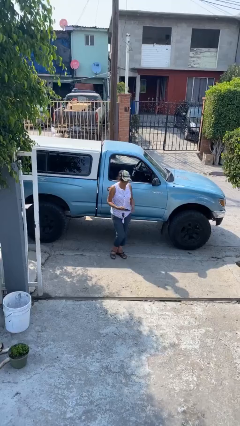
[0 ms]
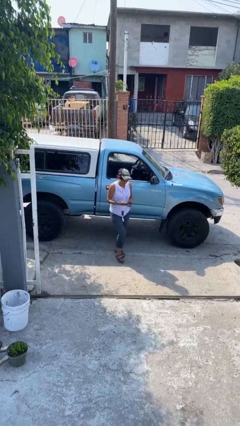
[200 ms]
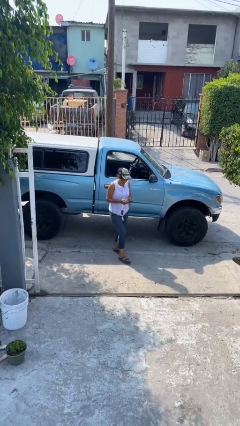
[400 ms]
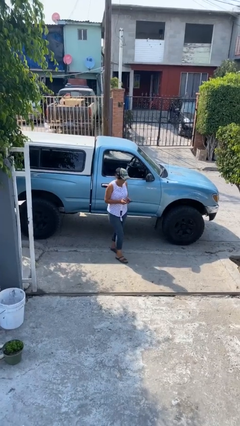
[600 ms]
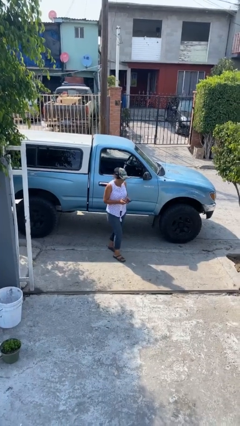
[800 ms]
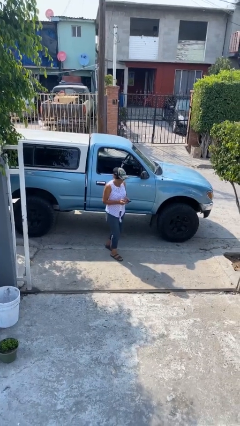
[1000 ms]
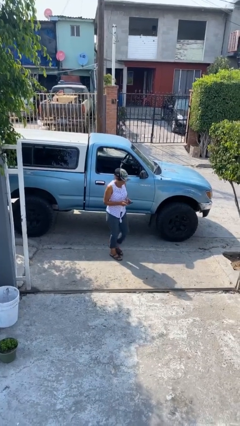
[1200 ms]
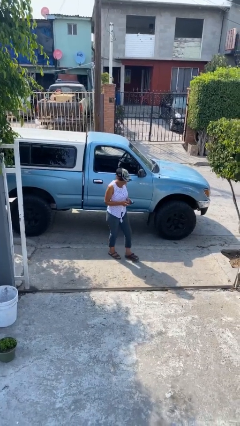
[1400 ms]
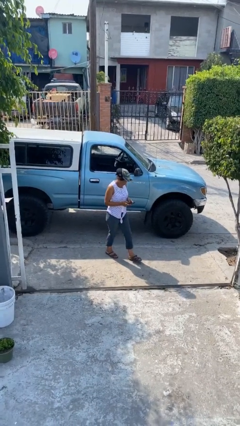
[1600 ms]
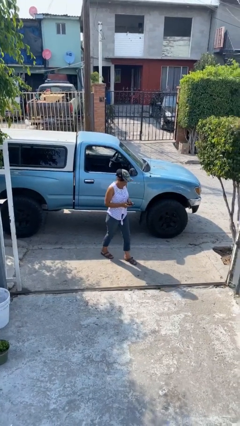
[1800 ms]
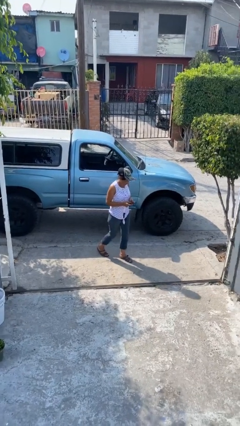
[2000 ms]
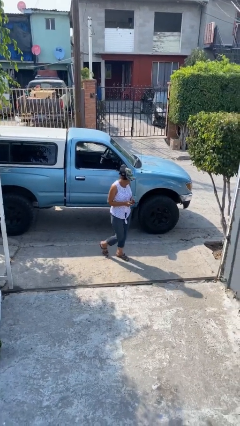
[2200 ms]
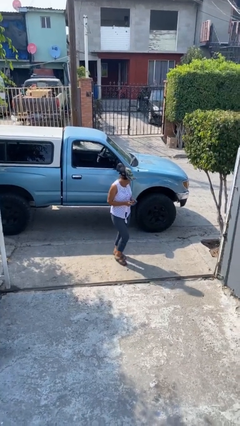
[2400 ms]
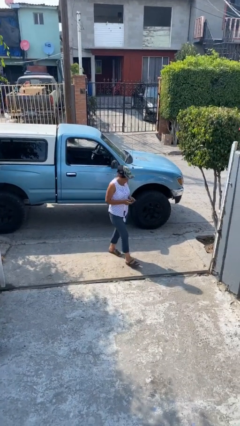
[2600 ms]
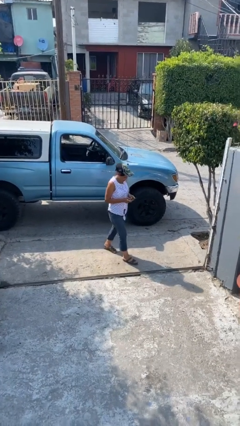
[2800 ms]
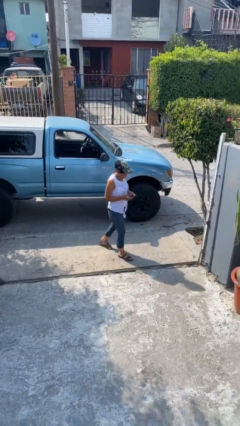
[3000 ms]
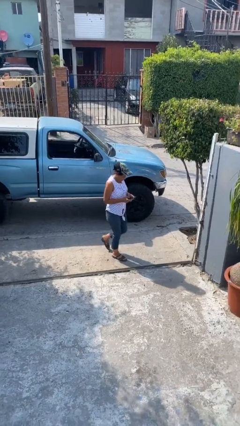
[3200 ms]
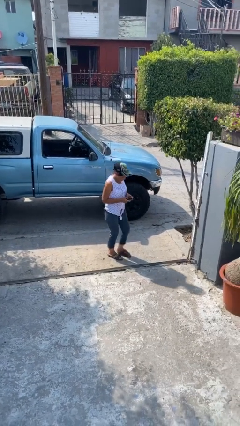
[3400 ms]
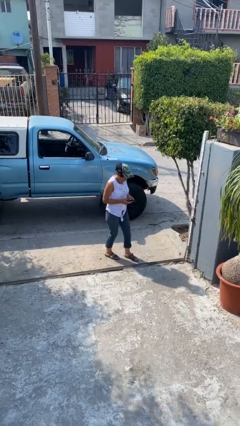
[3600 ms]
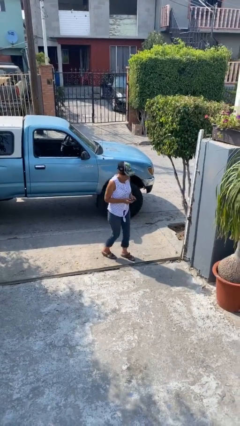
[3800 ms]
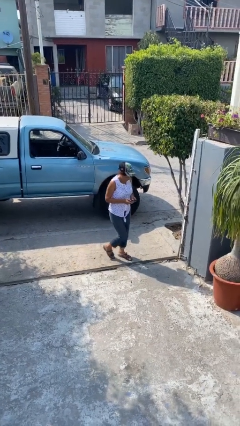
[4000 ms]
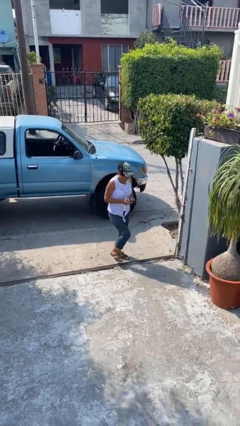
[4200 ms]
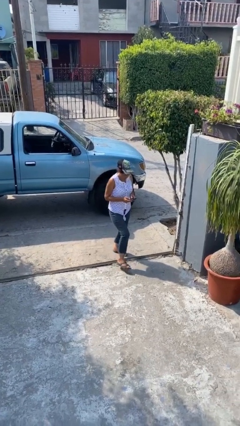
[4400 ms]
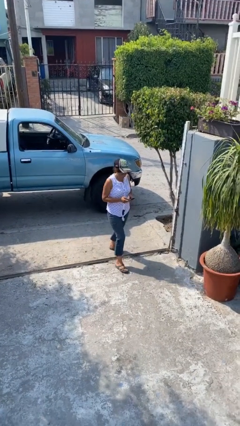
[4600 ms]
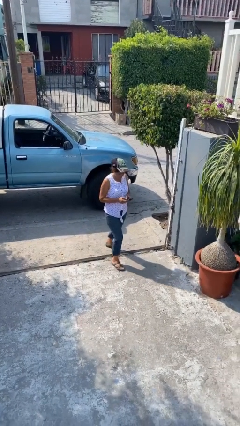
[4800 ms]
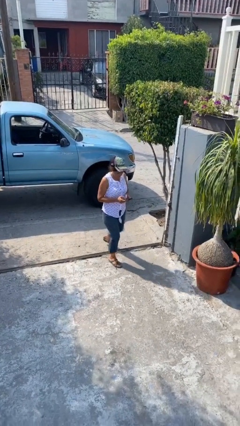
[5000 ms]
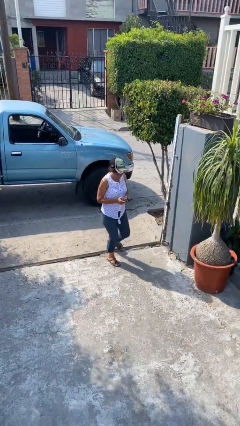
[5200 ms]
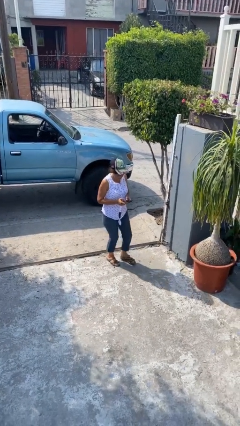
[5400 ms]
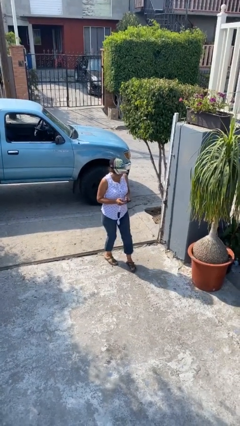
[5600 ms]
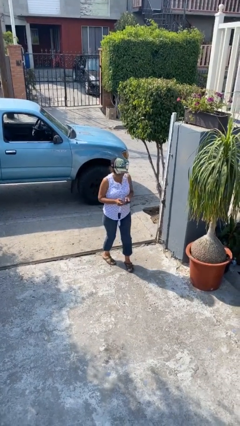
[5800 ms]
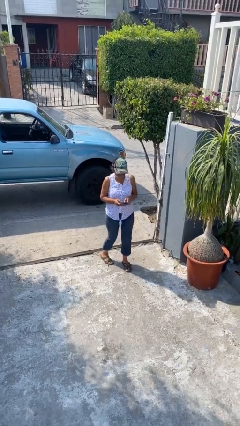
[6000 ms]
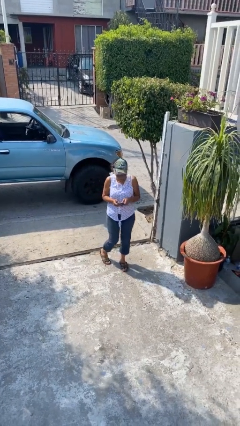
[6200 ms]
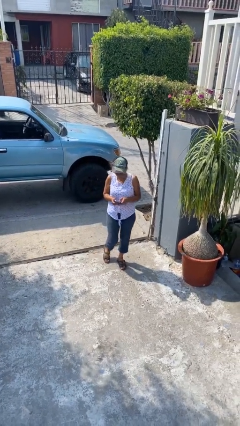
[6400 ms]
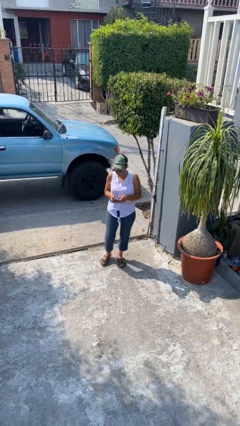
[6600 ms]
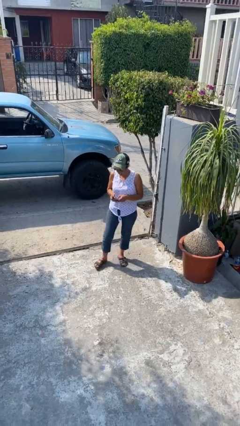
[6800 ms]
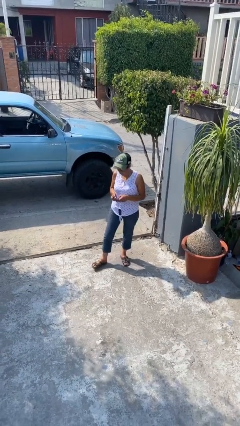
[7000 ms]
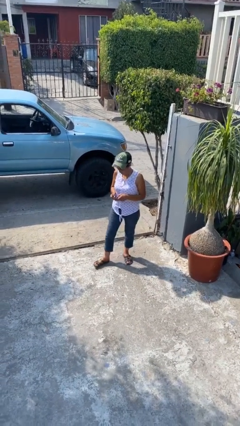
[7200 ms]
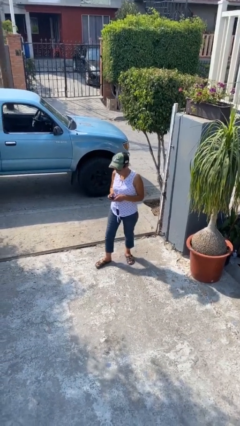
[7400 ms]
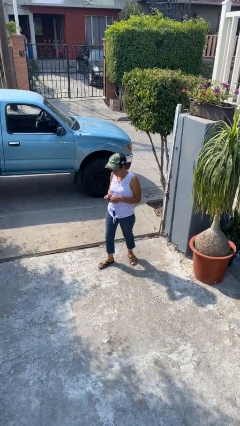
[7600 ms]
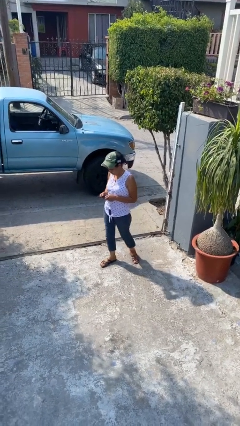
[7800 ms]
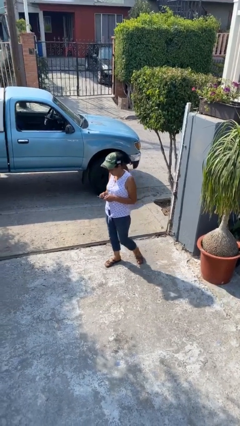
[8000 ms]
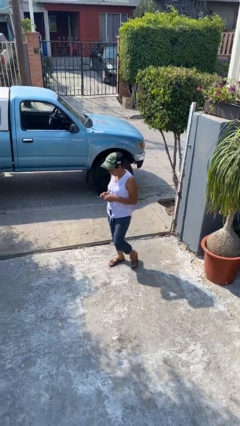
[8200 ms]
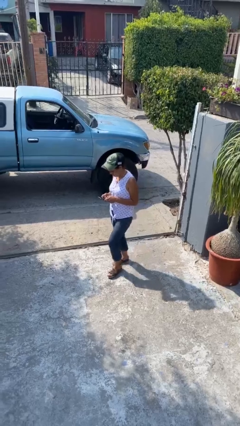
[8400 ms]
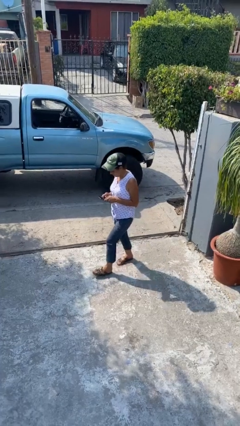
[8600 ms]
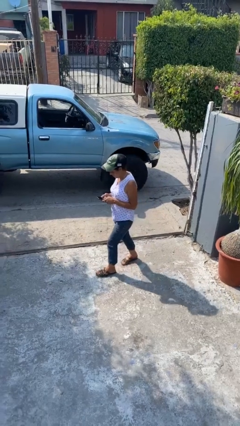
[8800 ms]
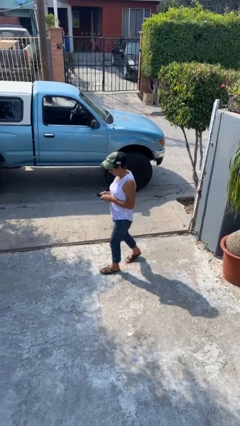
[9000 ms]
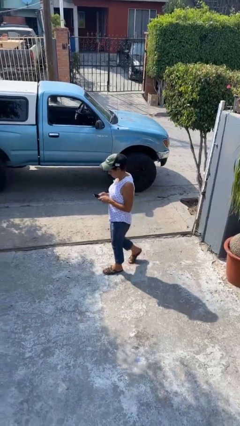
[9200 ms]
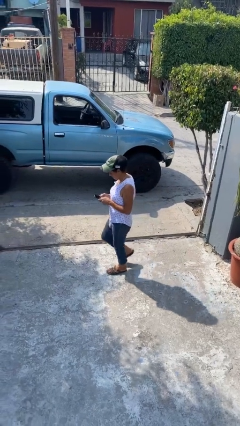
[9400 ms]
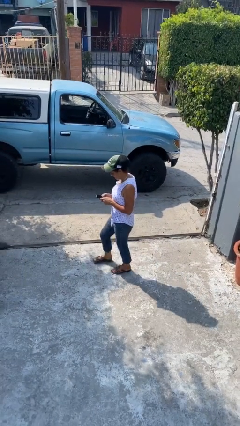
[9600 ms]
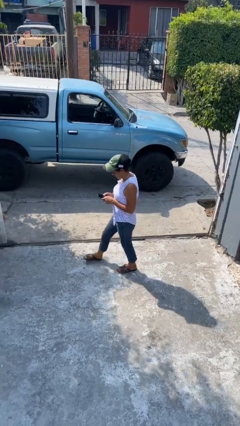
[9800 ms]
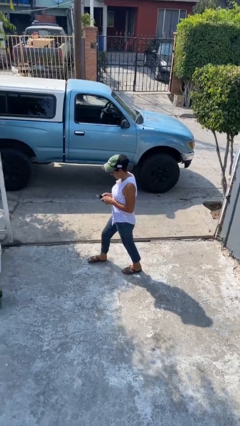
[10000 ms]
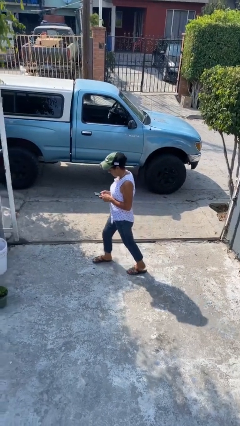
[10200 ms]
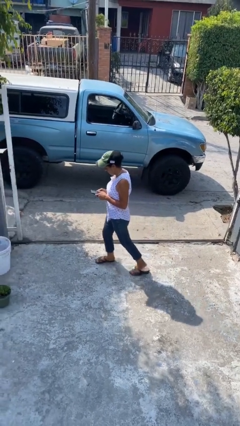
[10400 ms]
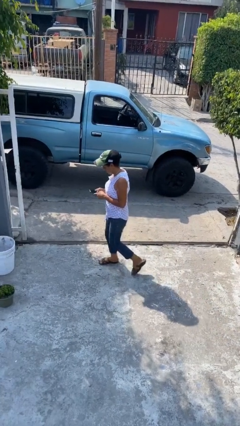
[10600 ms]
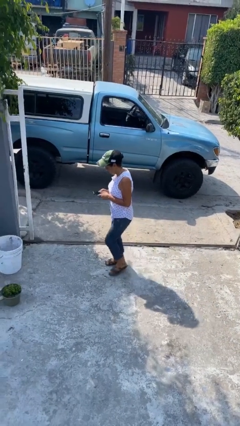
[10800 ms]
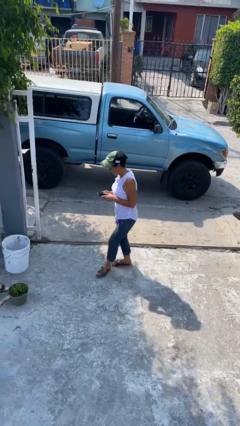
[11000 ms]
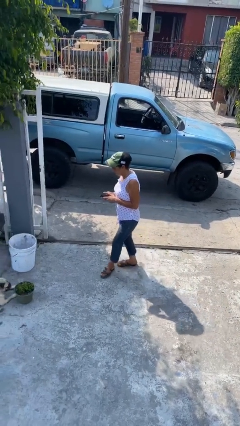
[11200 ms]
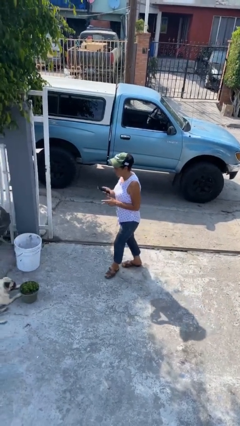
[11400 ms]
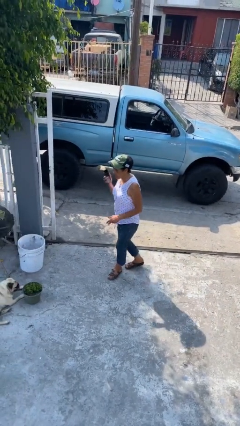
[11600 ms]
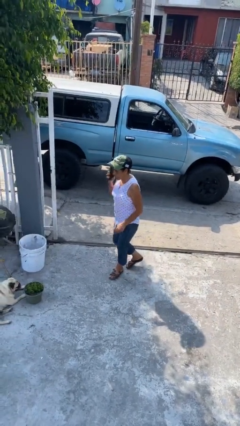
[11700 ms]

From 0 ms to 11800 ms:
person texts on phone

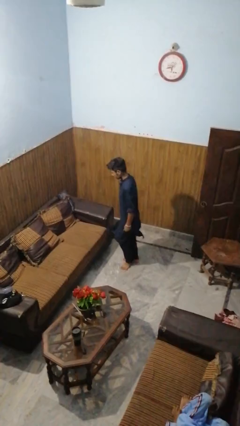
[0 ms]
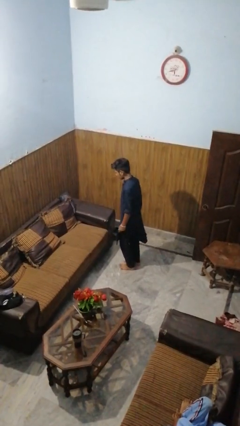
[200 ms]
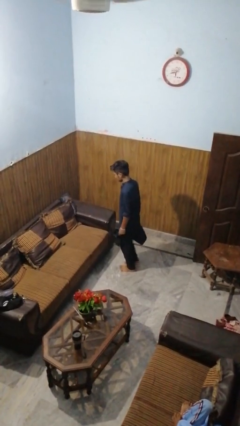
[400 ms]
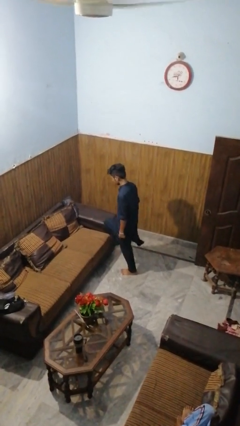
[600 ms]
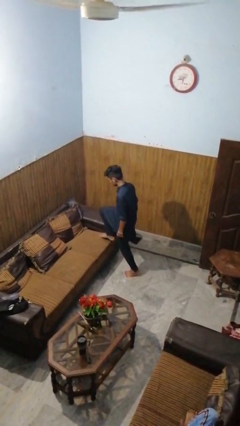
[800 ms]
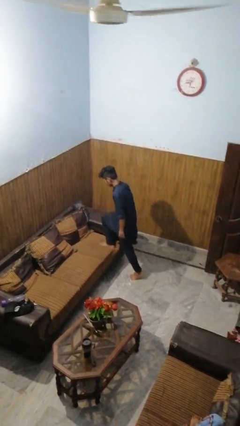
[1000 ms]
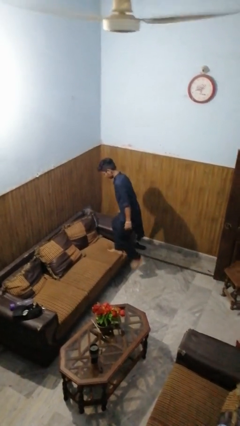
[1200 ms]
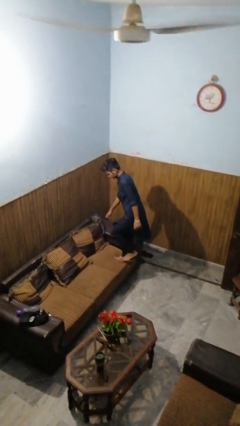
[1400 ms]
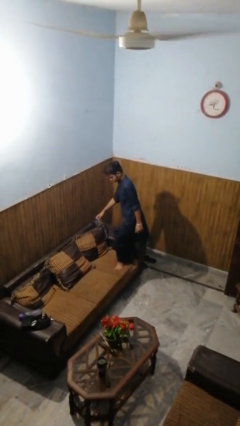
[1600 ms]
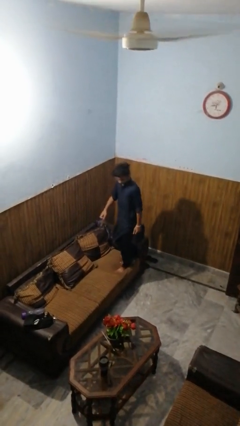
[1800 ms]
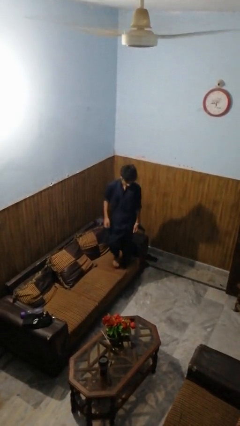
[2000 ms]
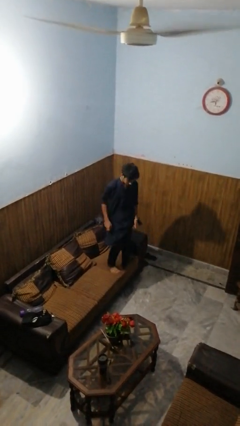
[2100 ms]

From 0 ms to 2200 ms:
person climbs on couch

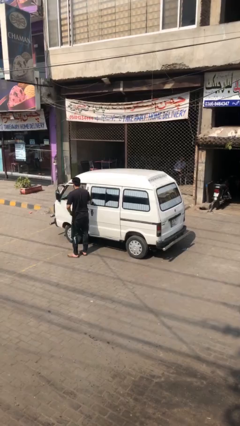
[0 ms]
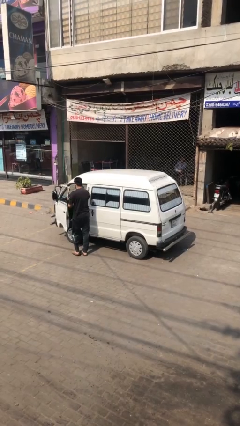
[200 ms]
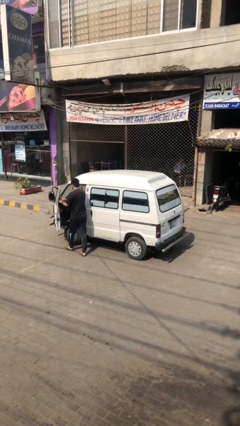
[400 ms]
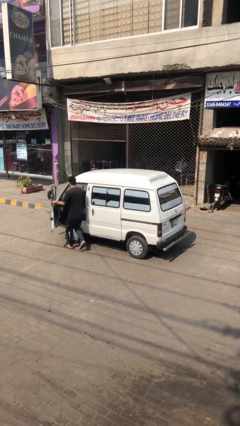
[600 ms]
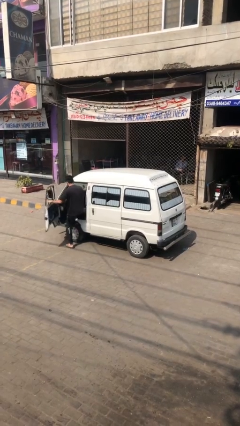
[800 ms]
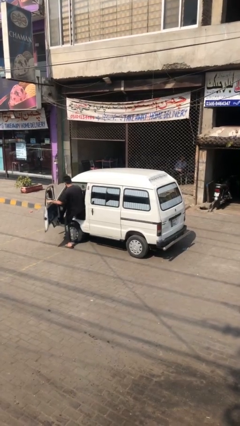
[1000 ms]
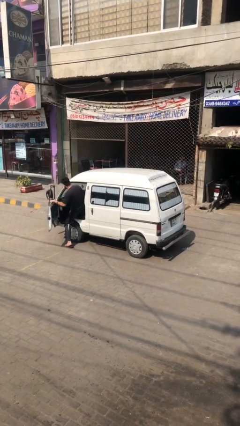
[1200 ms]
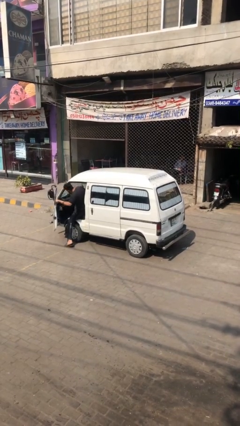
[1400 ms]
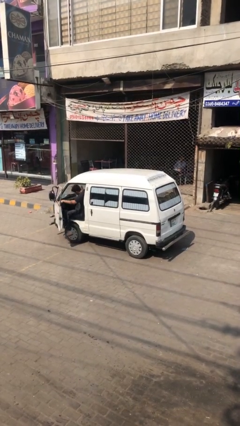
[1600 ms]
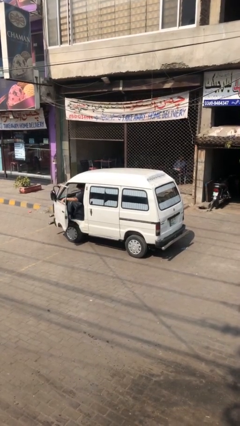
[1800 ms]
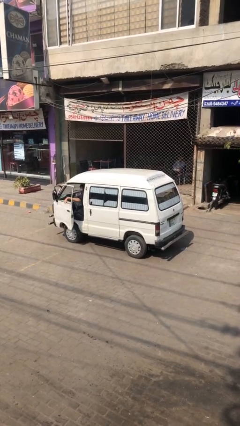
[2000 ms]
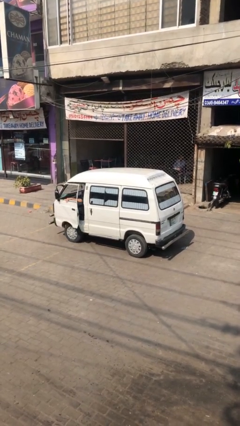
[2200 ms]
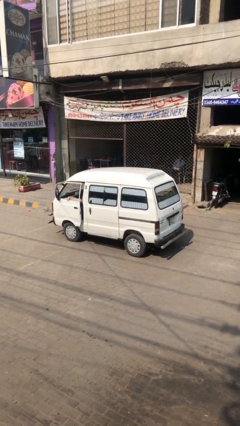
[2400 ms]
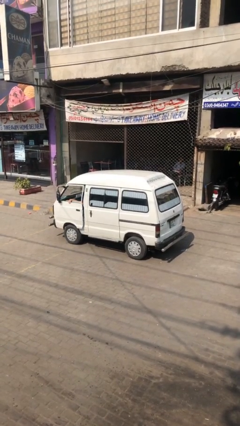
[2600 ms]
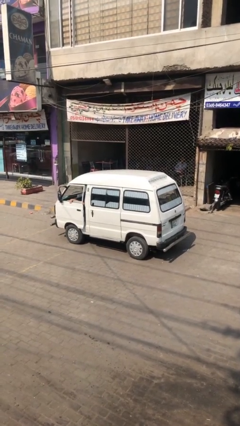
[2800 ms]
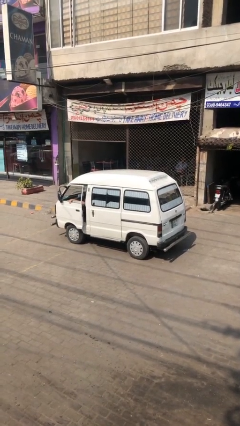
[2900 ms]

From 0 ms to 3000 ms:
car picks up person

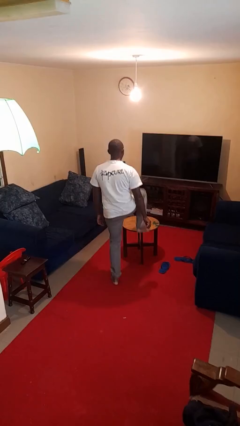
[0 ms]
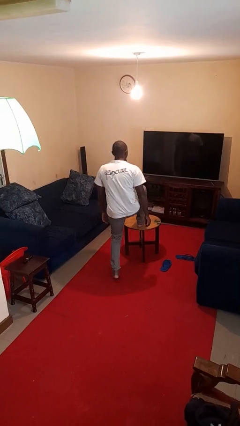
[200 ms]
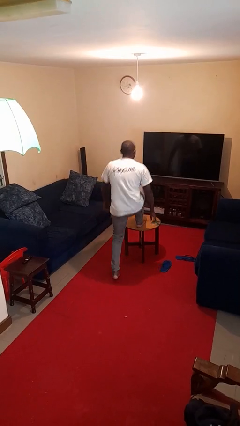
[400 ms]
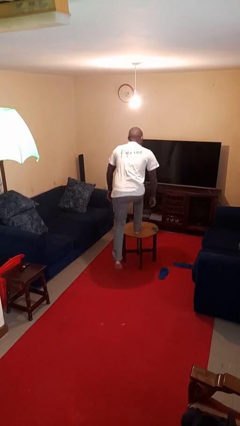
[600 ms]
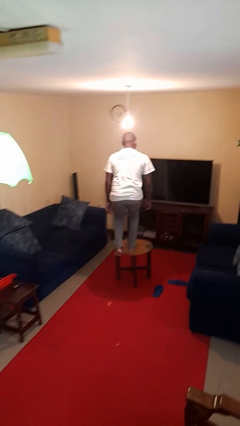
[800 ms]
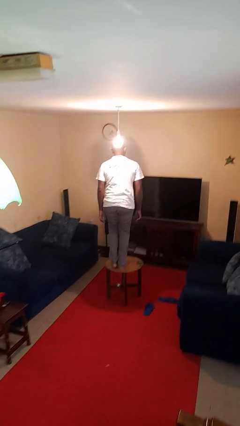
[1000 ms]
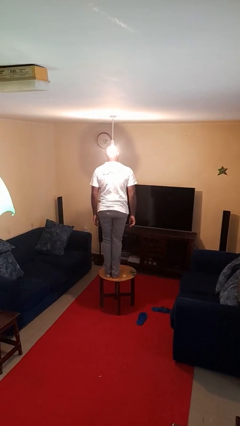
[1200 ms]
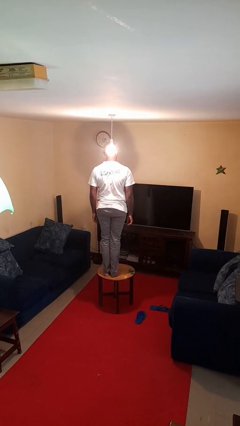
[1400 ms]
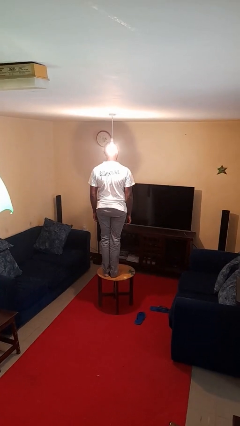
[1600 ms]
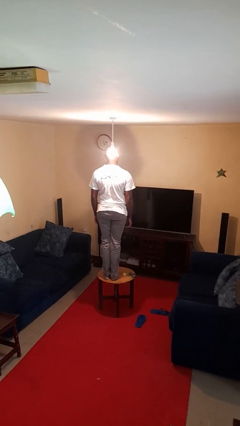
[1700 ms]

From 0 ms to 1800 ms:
person climbs on table
